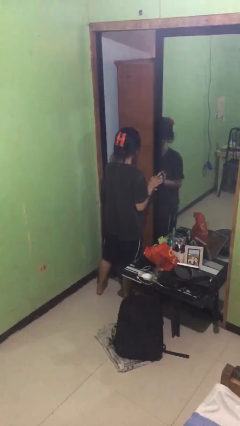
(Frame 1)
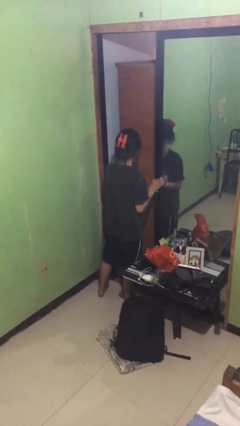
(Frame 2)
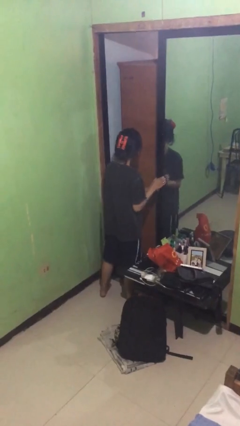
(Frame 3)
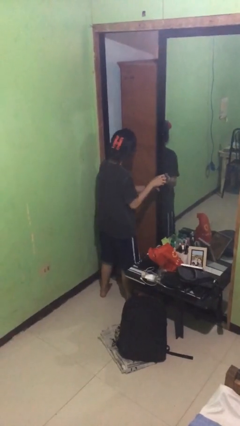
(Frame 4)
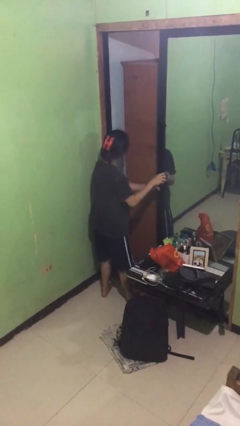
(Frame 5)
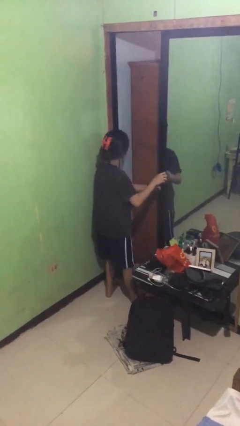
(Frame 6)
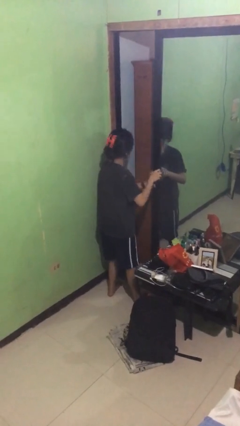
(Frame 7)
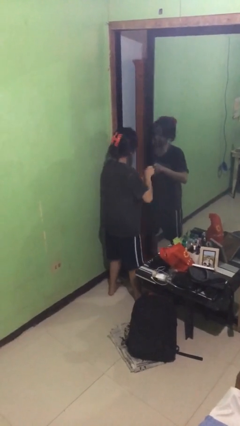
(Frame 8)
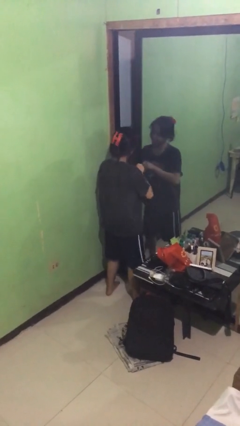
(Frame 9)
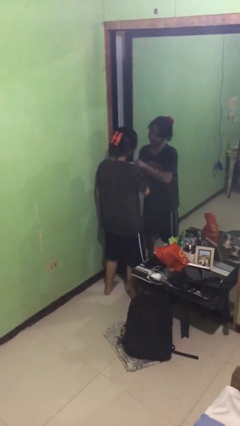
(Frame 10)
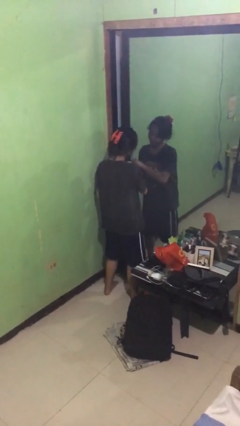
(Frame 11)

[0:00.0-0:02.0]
person closes sliding door

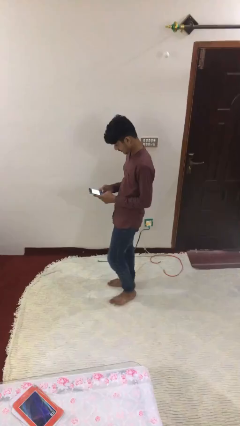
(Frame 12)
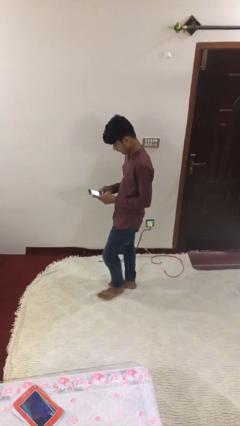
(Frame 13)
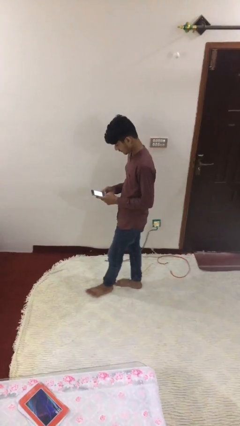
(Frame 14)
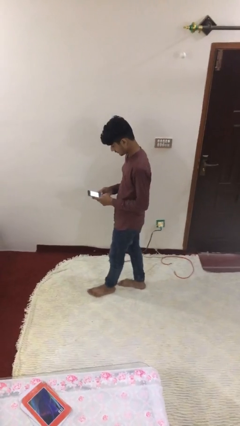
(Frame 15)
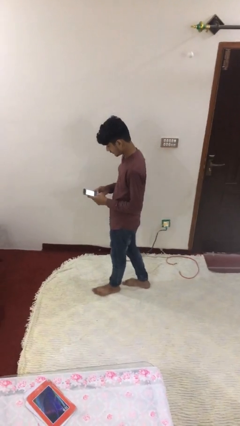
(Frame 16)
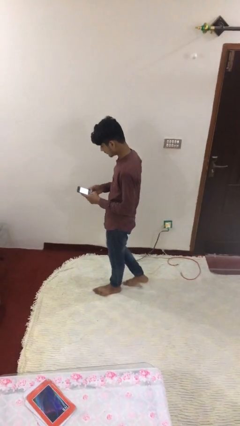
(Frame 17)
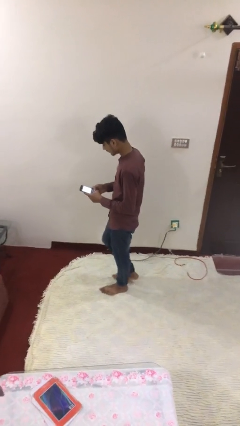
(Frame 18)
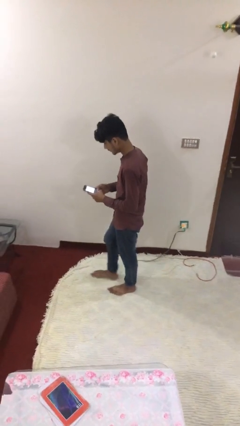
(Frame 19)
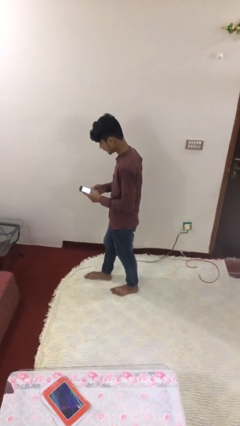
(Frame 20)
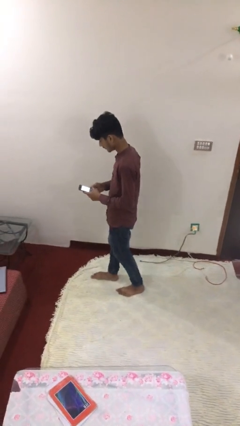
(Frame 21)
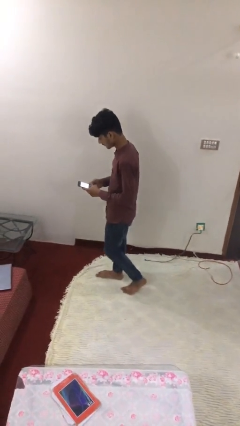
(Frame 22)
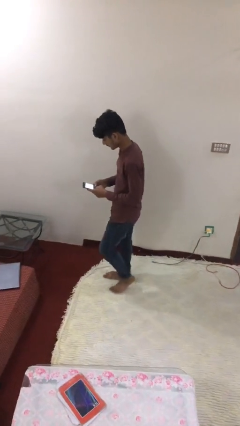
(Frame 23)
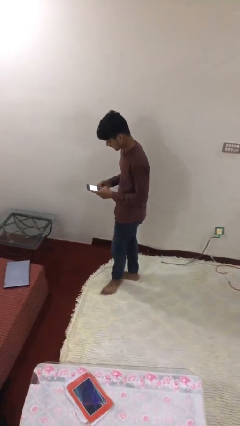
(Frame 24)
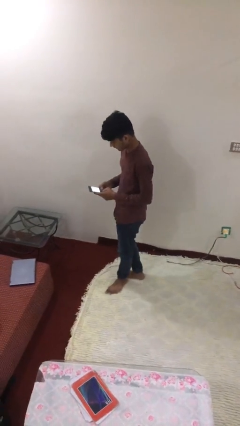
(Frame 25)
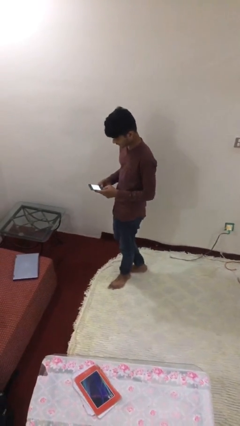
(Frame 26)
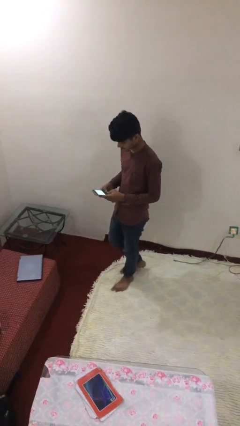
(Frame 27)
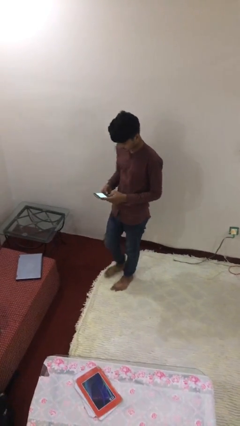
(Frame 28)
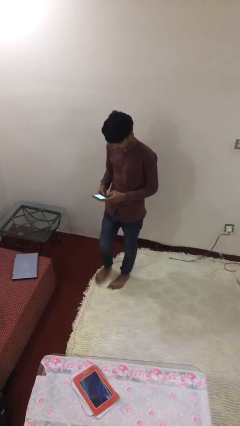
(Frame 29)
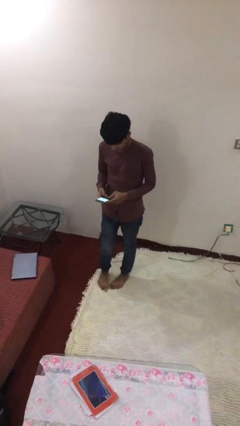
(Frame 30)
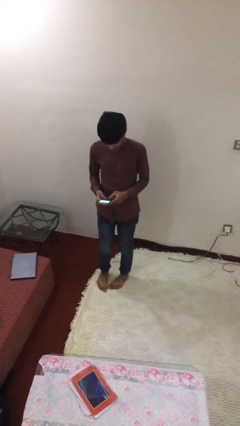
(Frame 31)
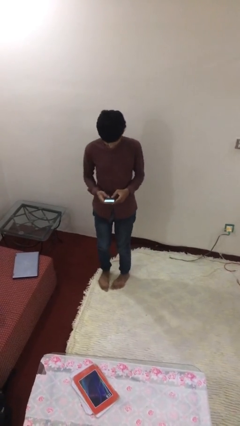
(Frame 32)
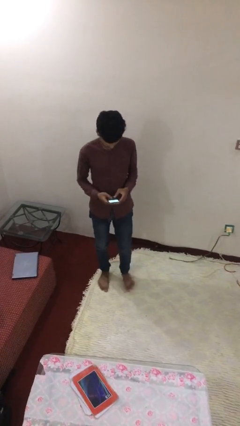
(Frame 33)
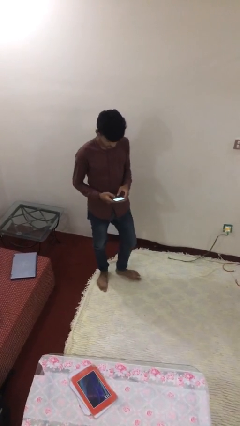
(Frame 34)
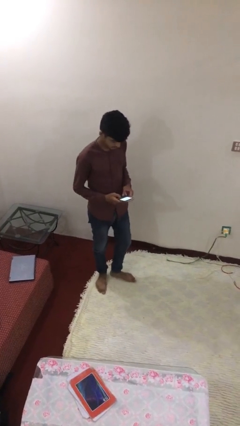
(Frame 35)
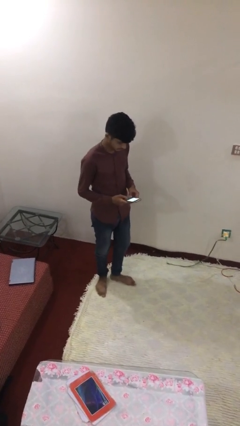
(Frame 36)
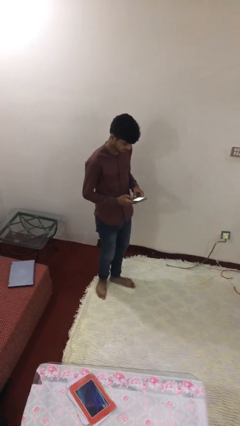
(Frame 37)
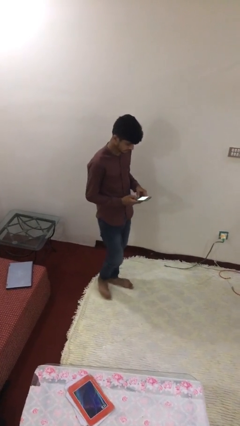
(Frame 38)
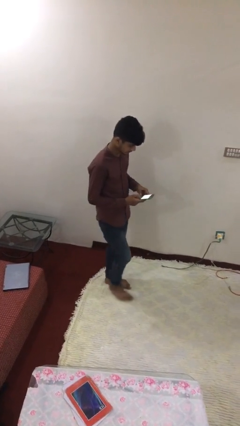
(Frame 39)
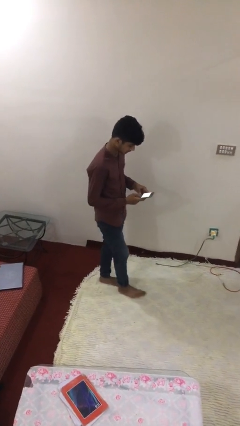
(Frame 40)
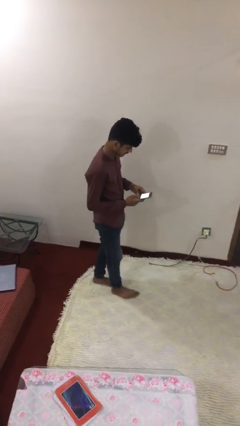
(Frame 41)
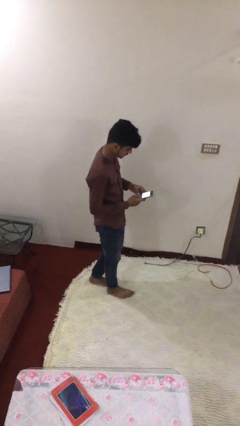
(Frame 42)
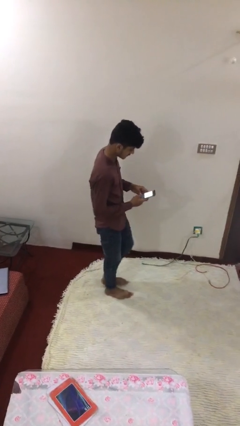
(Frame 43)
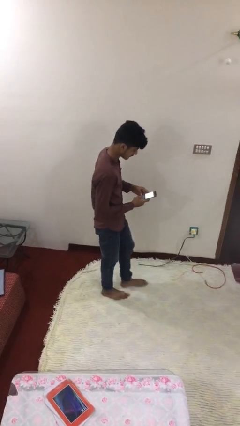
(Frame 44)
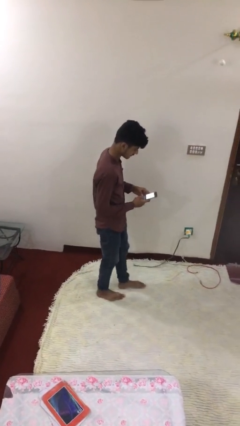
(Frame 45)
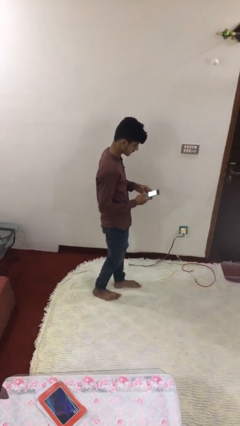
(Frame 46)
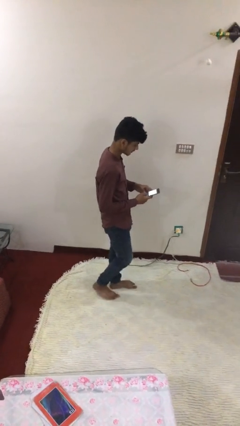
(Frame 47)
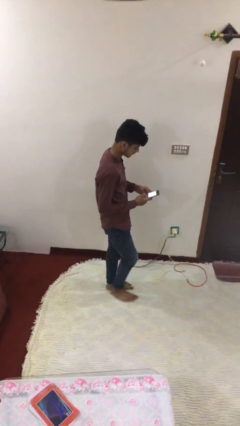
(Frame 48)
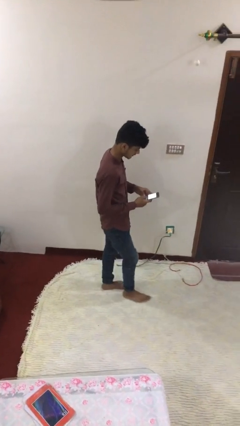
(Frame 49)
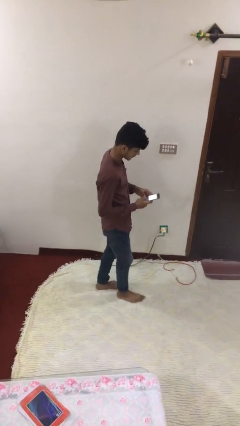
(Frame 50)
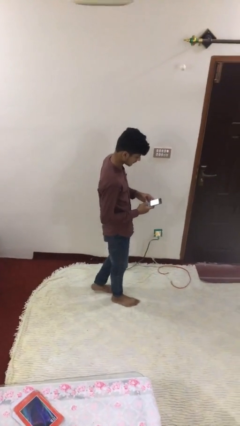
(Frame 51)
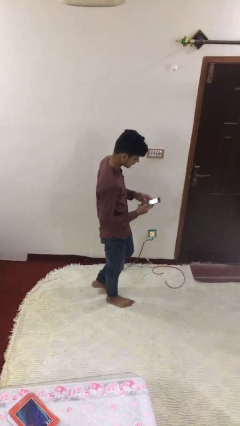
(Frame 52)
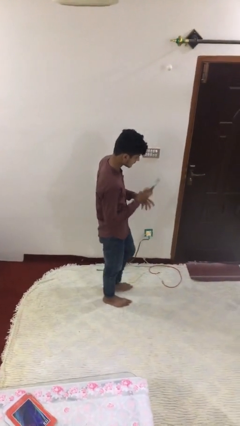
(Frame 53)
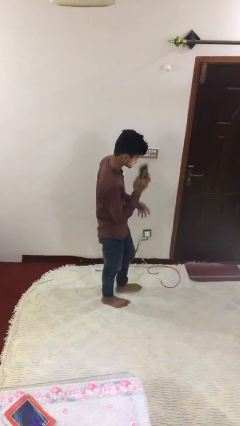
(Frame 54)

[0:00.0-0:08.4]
person texts on phone

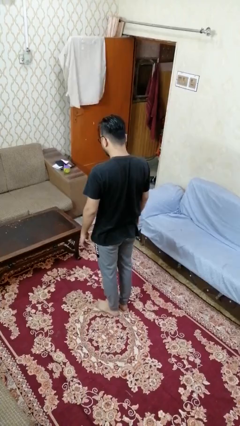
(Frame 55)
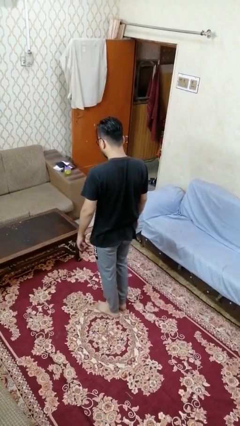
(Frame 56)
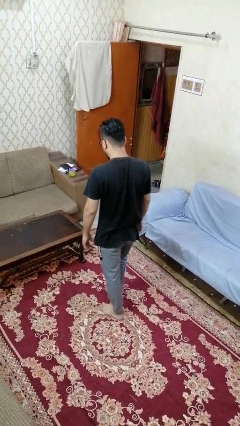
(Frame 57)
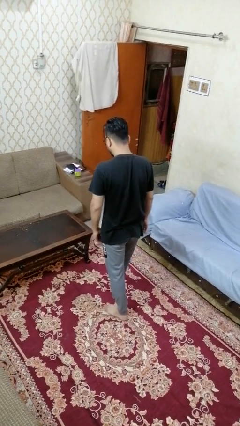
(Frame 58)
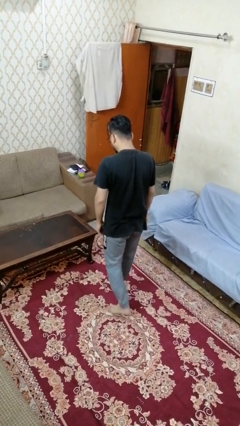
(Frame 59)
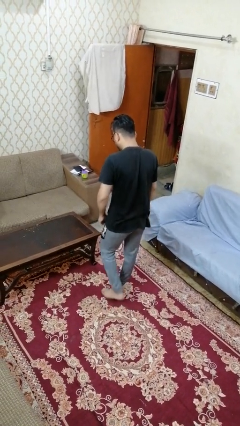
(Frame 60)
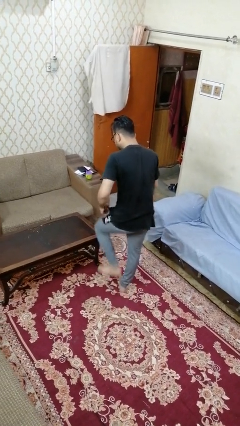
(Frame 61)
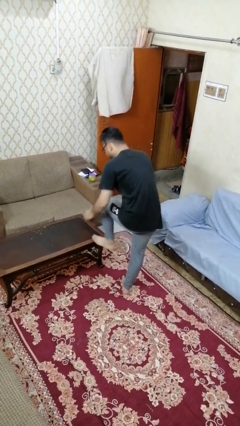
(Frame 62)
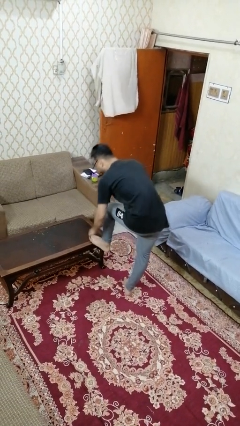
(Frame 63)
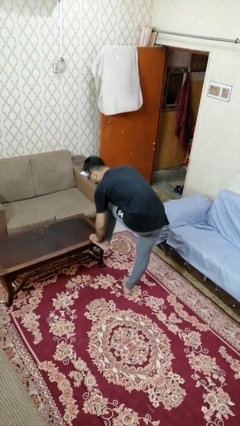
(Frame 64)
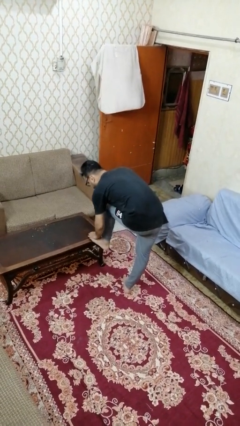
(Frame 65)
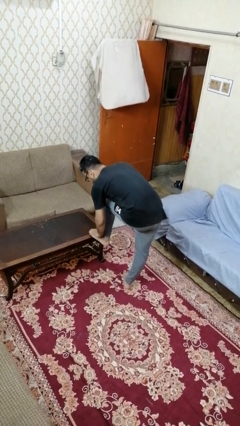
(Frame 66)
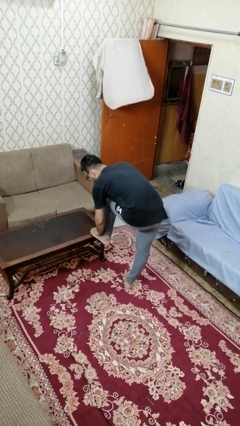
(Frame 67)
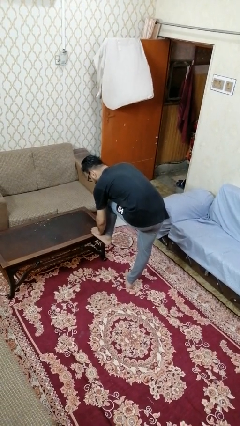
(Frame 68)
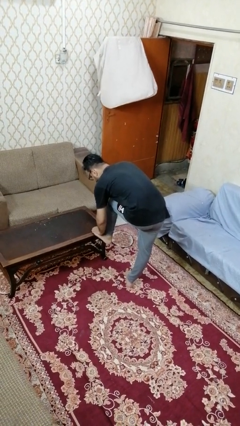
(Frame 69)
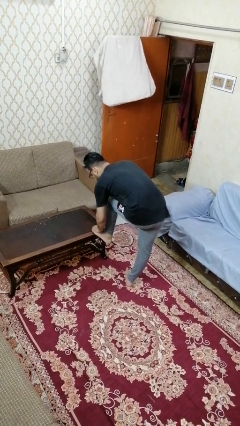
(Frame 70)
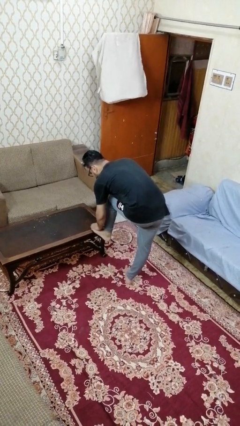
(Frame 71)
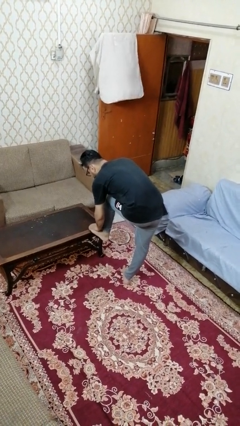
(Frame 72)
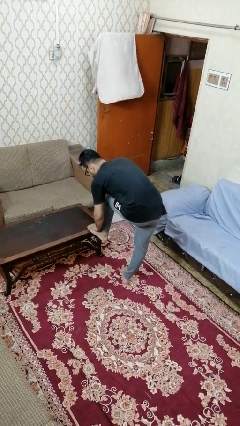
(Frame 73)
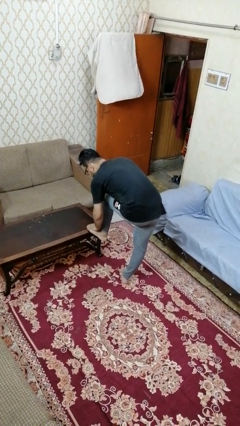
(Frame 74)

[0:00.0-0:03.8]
person stubs toe

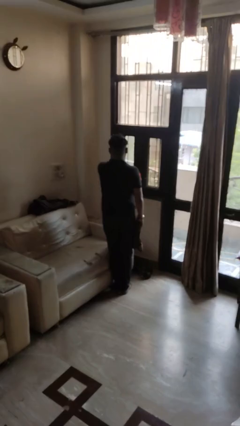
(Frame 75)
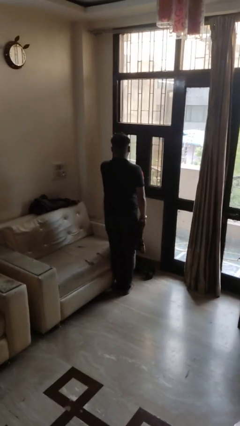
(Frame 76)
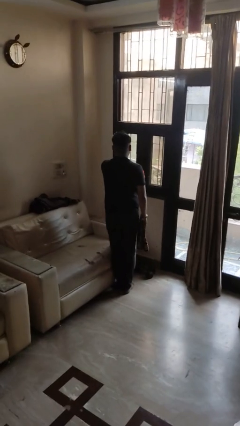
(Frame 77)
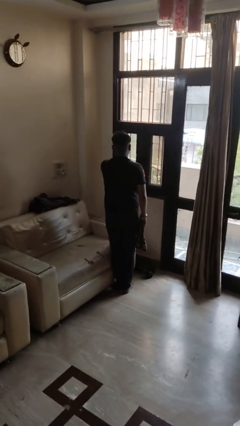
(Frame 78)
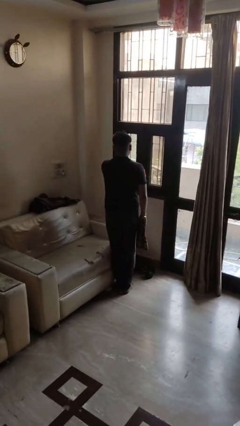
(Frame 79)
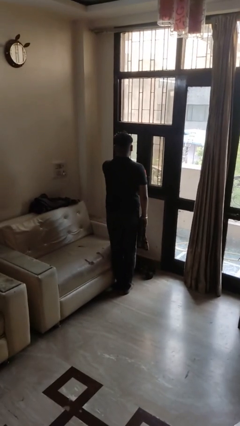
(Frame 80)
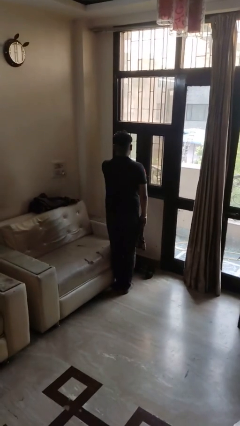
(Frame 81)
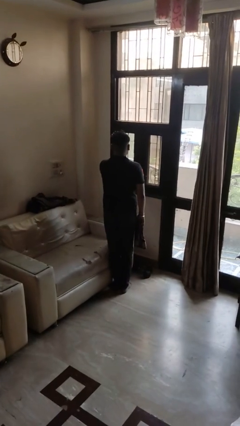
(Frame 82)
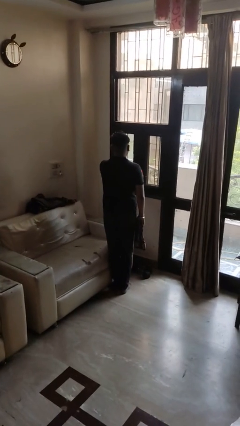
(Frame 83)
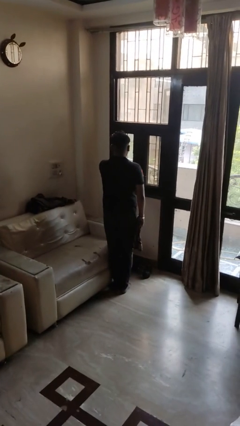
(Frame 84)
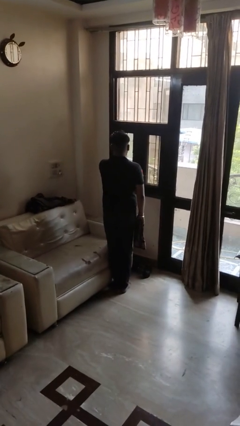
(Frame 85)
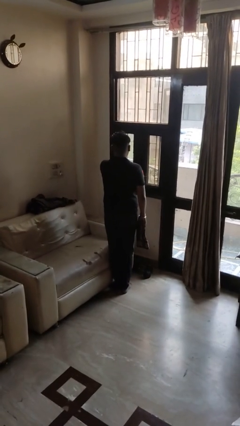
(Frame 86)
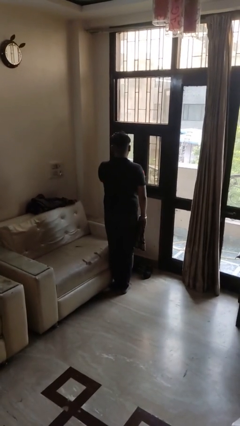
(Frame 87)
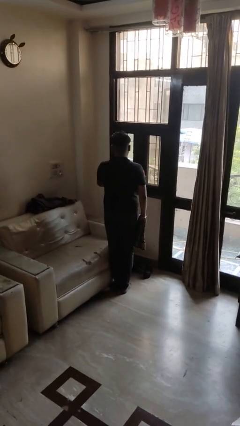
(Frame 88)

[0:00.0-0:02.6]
person sprays from bottle

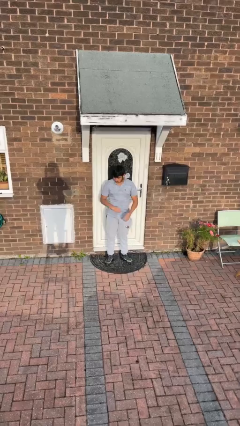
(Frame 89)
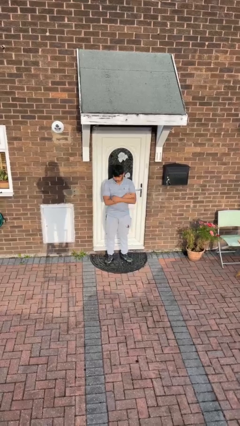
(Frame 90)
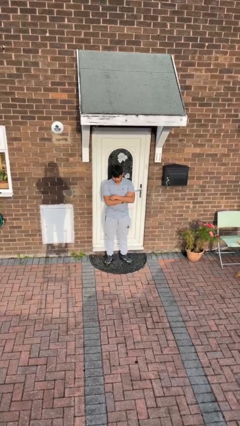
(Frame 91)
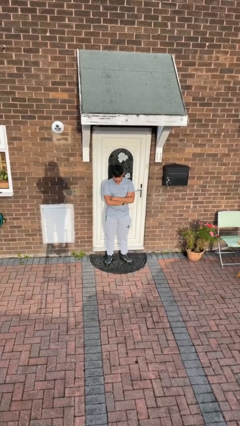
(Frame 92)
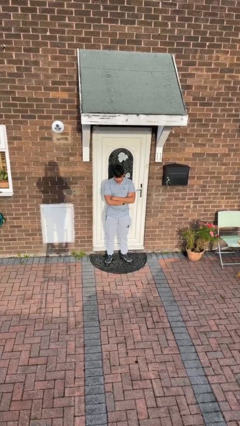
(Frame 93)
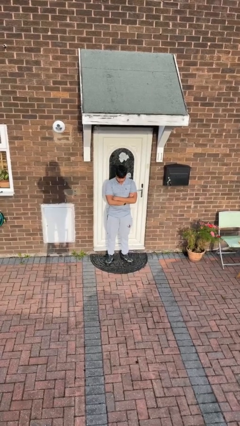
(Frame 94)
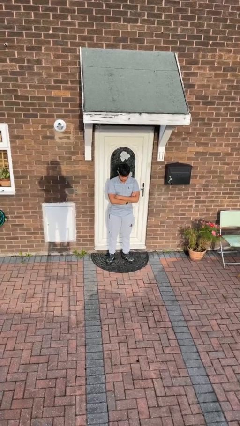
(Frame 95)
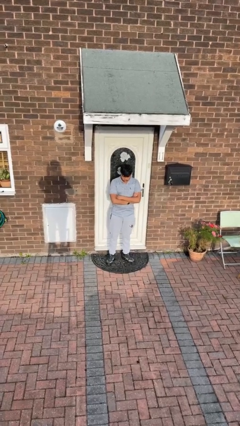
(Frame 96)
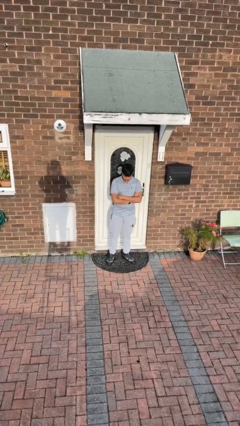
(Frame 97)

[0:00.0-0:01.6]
person crosses arms
